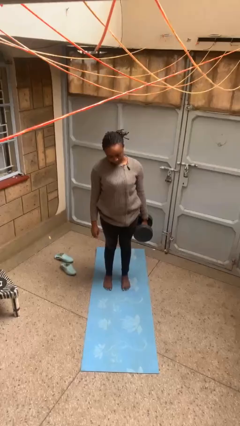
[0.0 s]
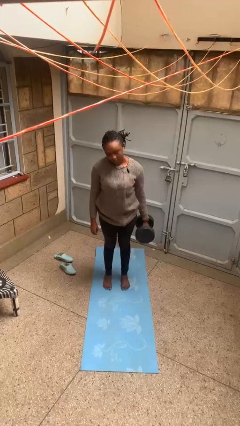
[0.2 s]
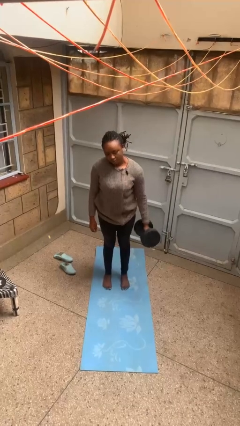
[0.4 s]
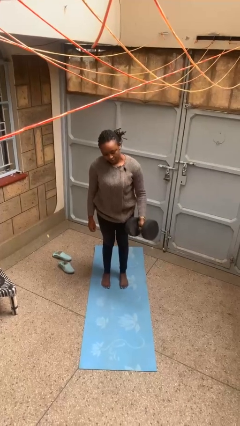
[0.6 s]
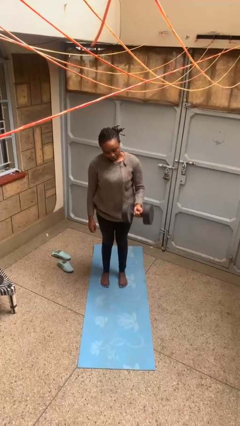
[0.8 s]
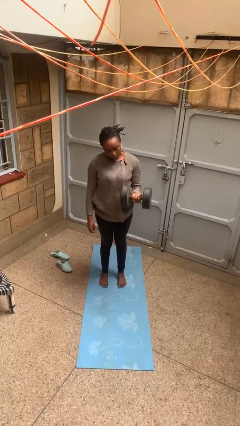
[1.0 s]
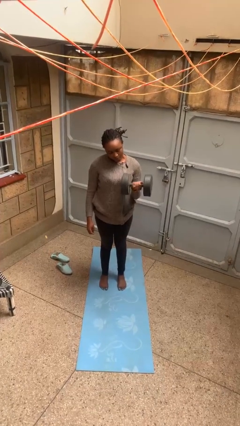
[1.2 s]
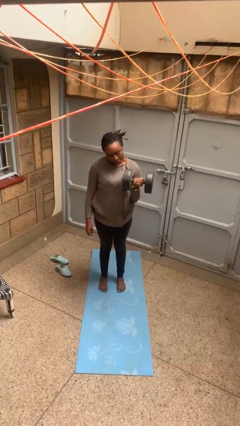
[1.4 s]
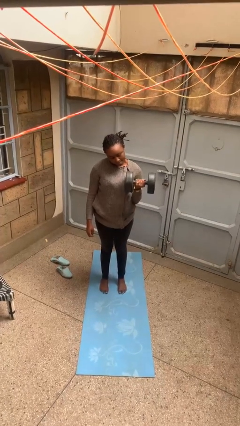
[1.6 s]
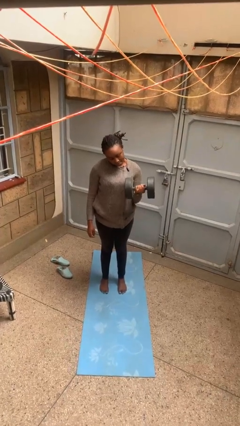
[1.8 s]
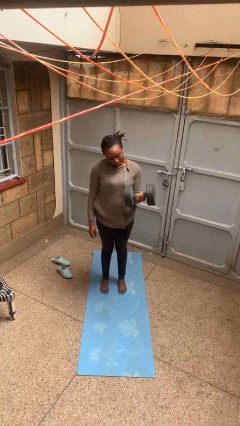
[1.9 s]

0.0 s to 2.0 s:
person lifts dumbbells

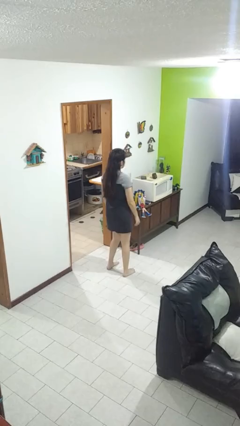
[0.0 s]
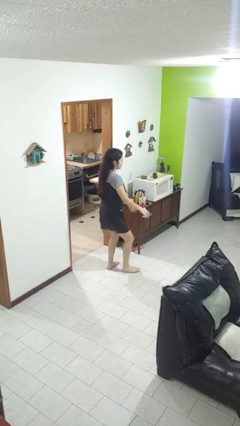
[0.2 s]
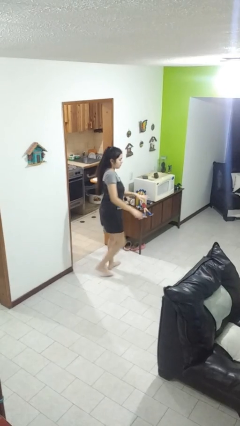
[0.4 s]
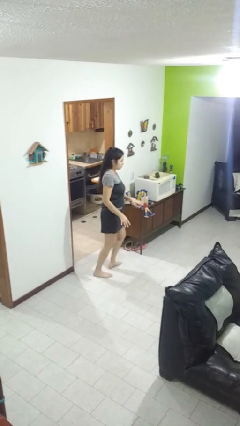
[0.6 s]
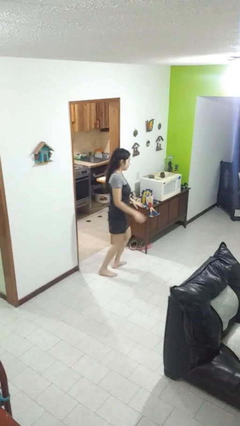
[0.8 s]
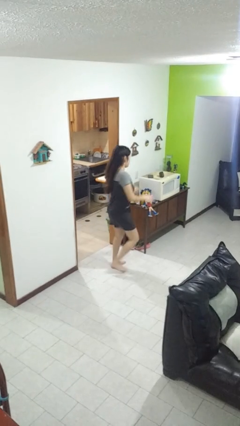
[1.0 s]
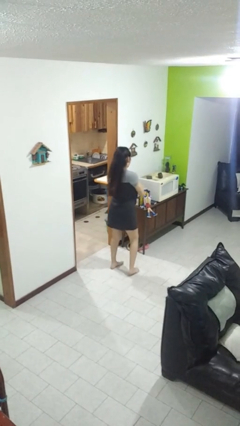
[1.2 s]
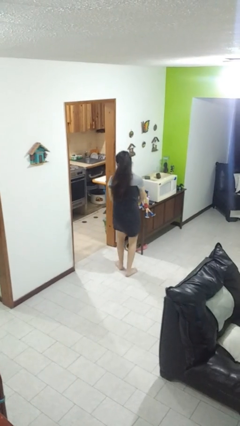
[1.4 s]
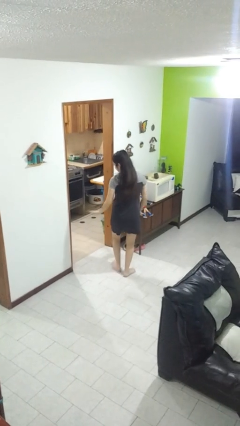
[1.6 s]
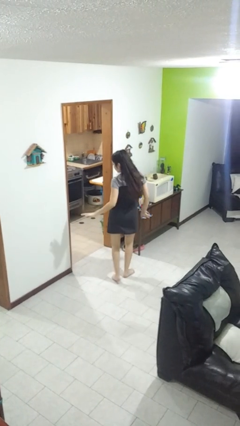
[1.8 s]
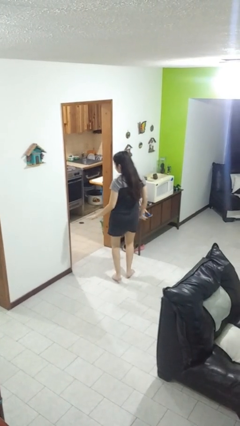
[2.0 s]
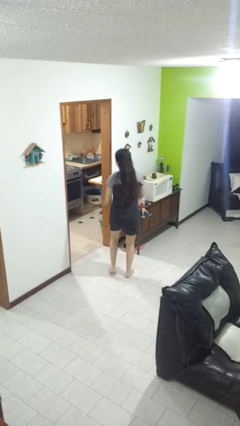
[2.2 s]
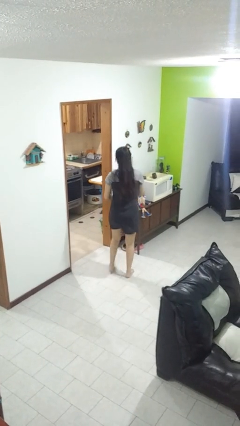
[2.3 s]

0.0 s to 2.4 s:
person dances in place

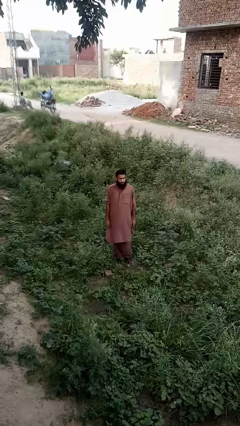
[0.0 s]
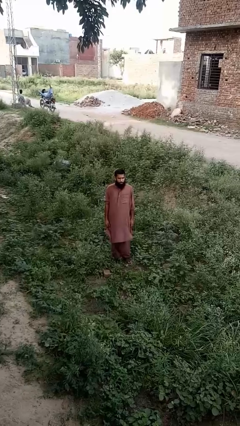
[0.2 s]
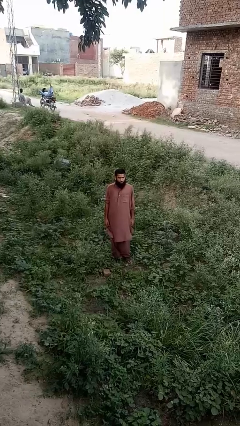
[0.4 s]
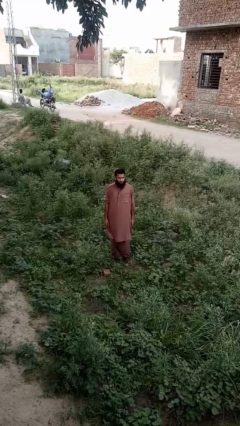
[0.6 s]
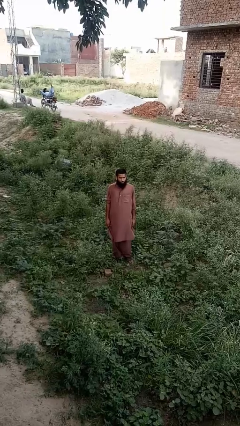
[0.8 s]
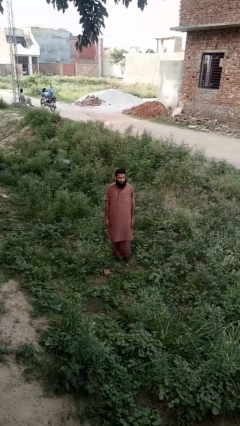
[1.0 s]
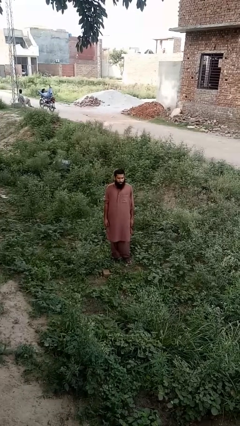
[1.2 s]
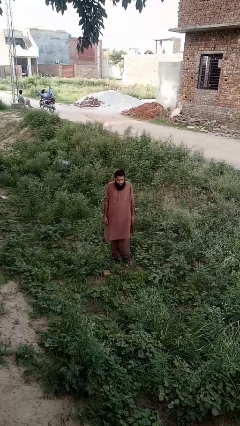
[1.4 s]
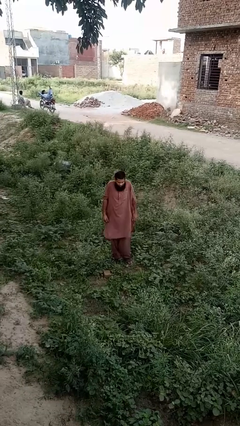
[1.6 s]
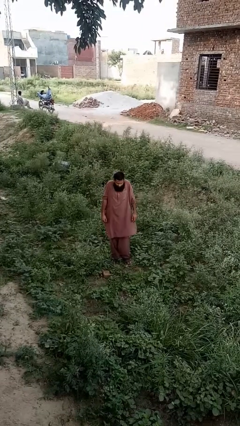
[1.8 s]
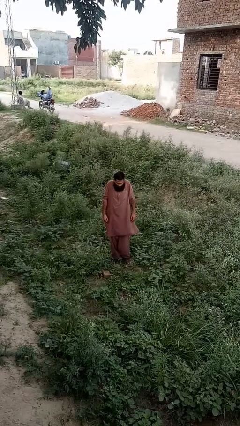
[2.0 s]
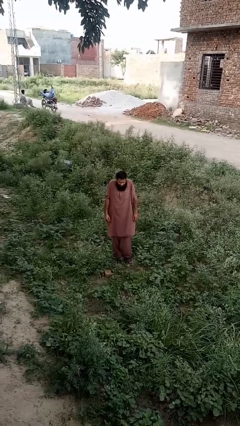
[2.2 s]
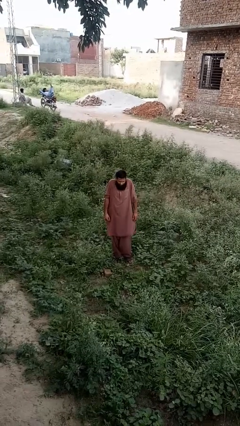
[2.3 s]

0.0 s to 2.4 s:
person shrugs

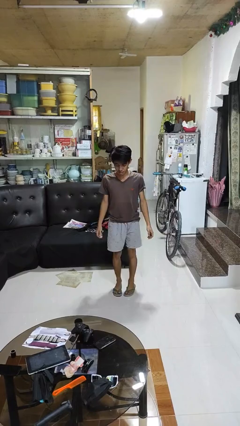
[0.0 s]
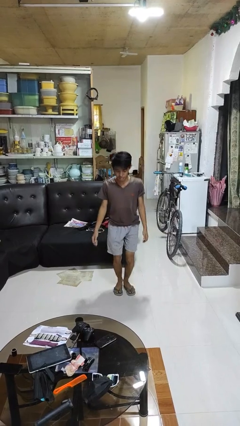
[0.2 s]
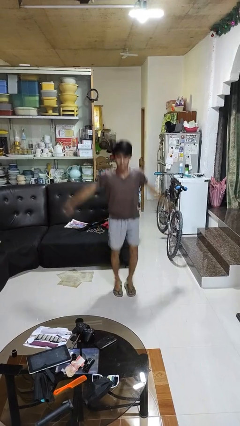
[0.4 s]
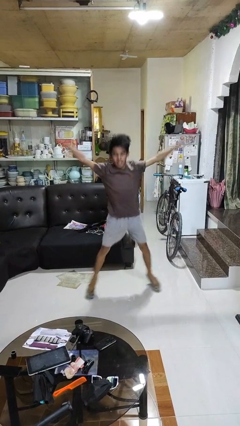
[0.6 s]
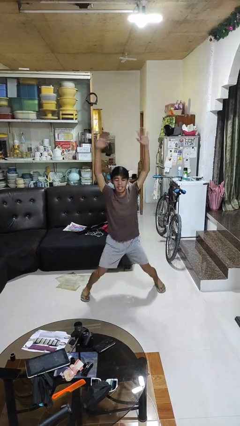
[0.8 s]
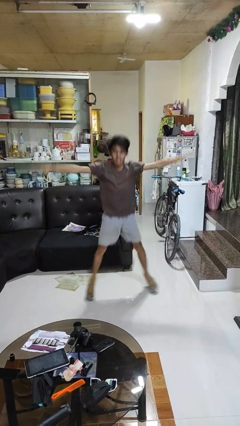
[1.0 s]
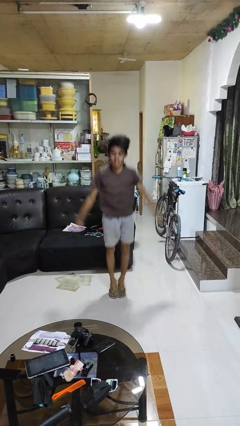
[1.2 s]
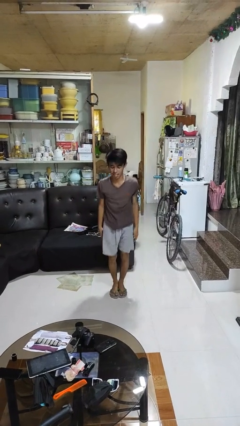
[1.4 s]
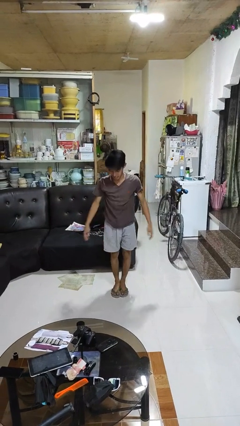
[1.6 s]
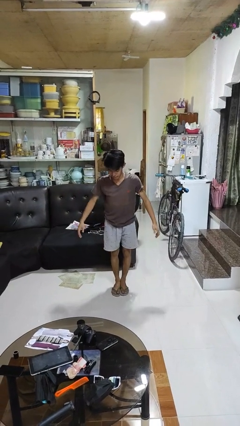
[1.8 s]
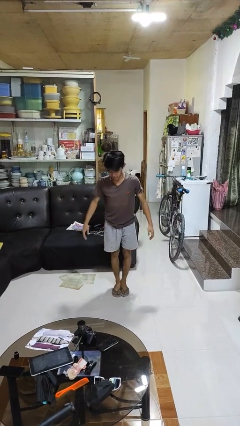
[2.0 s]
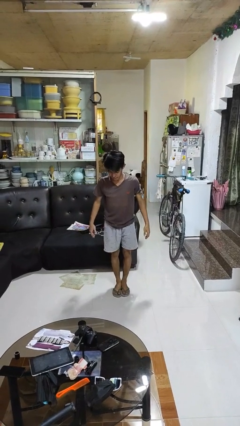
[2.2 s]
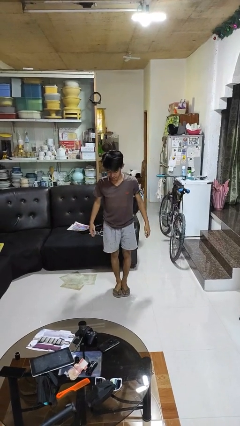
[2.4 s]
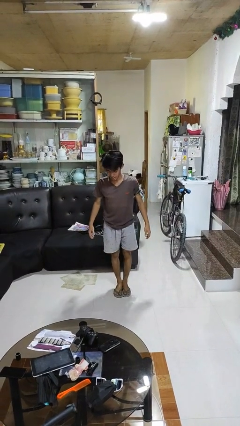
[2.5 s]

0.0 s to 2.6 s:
person exercises with jumping jacks

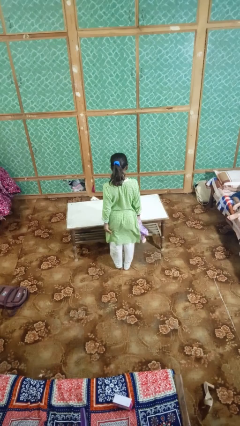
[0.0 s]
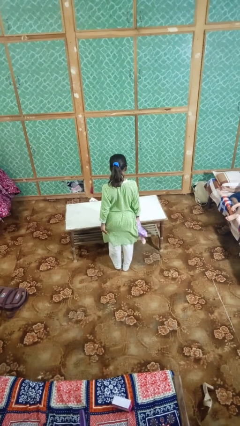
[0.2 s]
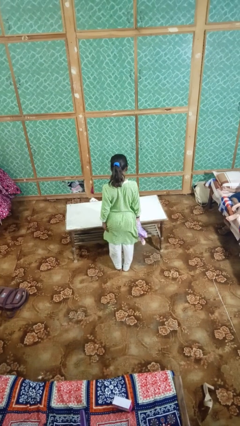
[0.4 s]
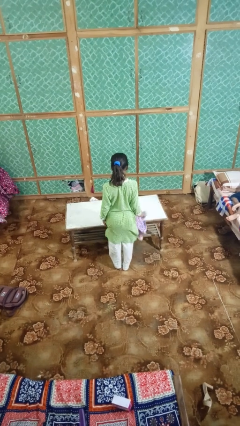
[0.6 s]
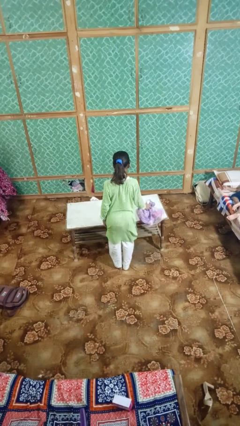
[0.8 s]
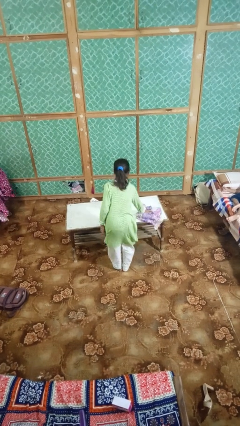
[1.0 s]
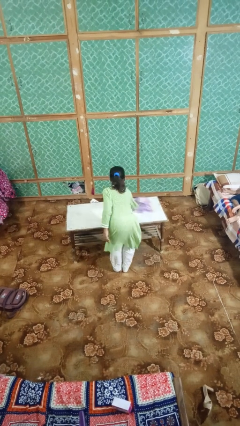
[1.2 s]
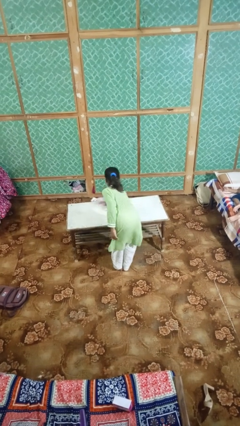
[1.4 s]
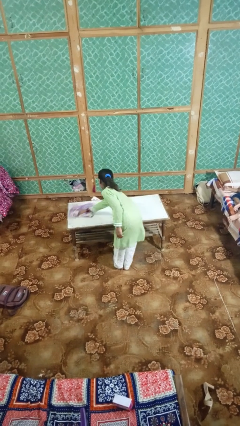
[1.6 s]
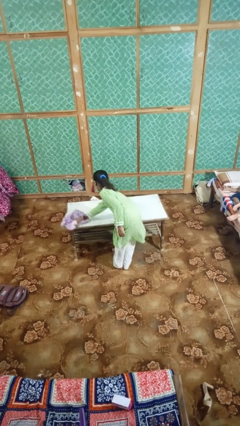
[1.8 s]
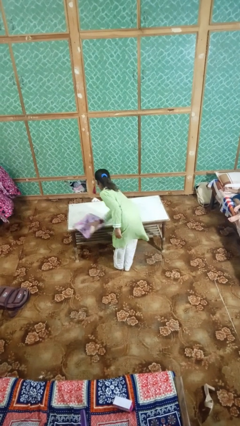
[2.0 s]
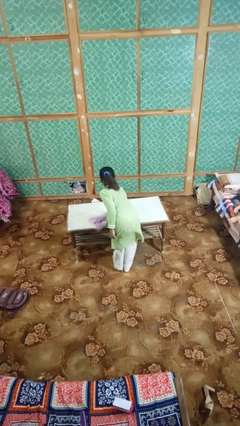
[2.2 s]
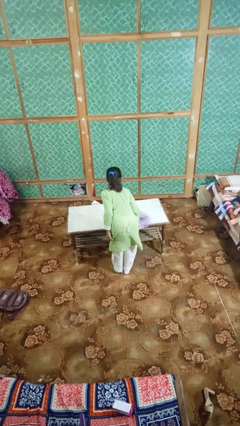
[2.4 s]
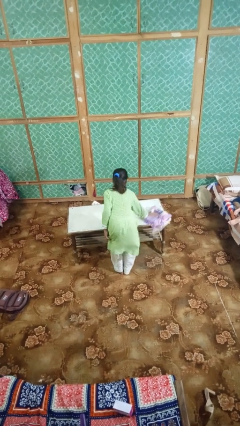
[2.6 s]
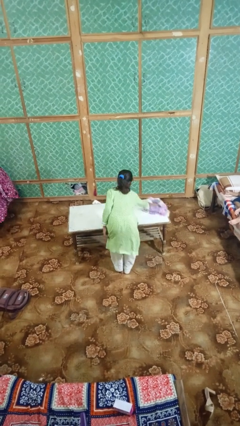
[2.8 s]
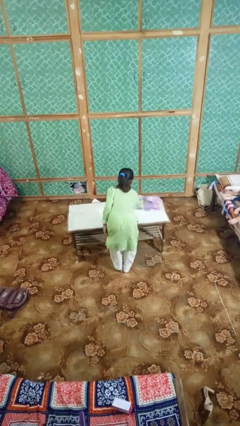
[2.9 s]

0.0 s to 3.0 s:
person cleans table with rag

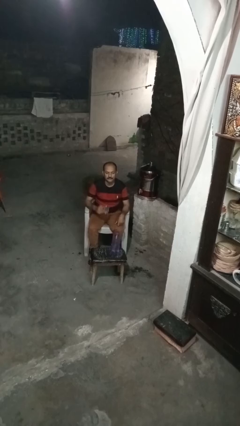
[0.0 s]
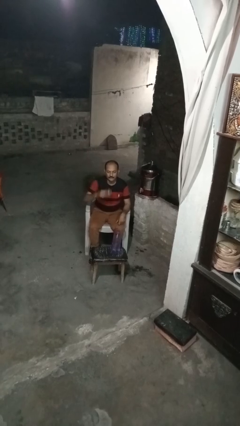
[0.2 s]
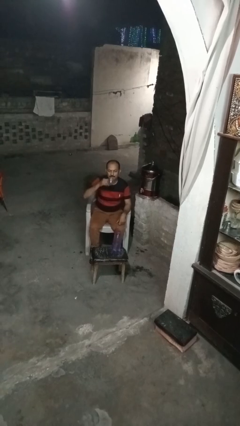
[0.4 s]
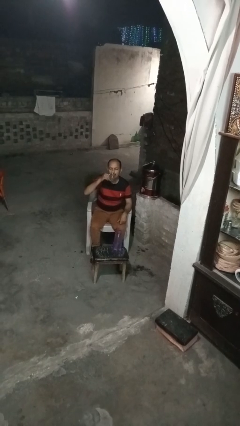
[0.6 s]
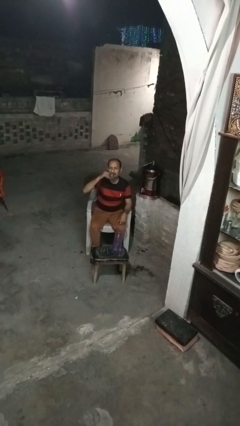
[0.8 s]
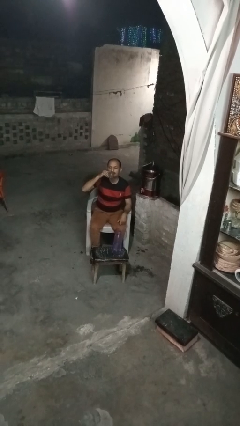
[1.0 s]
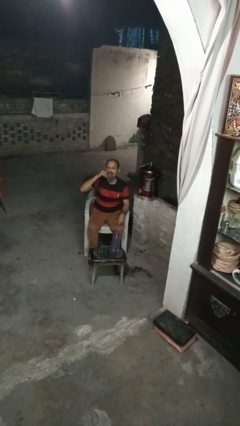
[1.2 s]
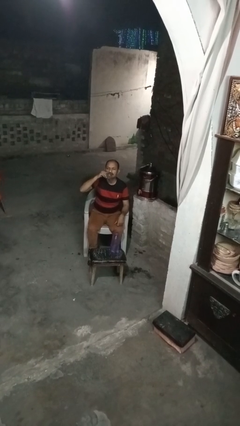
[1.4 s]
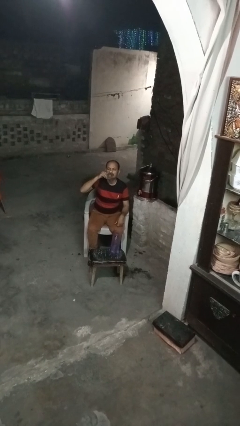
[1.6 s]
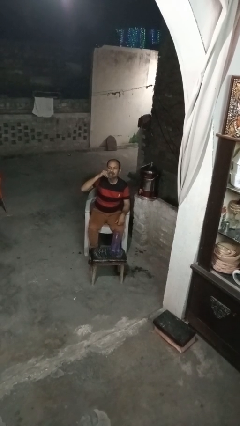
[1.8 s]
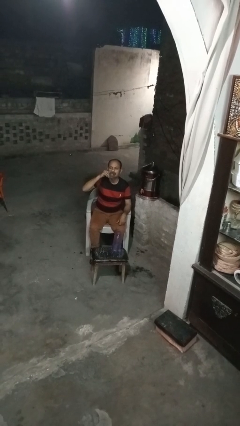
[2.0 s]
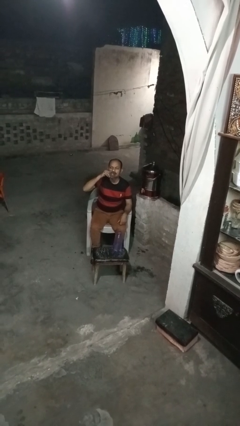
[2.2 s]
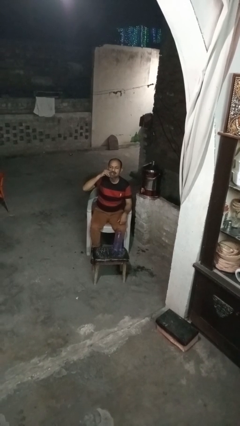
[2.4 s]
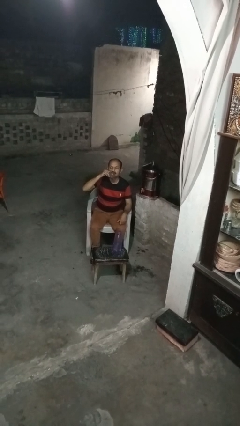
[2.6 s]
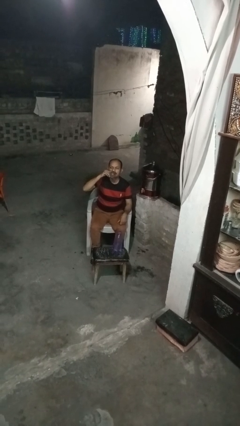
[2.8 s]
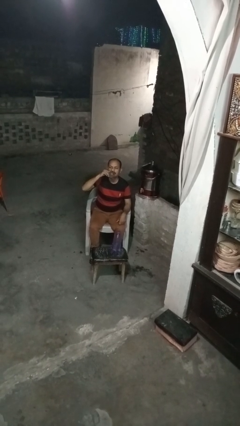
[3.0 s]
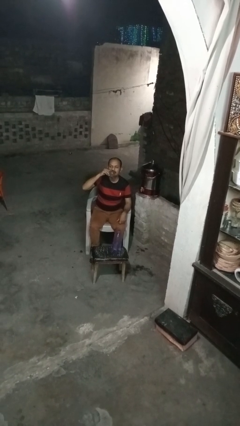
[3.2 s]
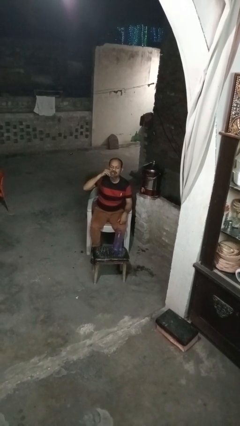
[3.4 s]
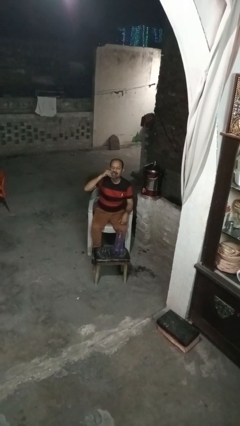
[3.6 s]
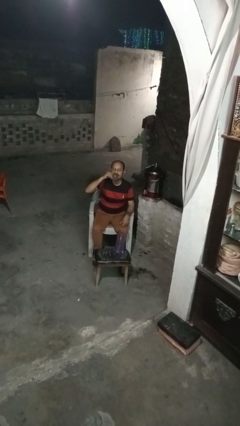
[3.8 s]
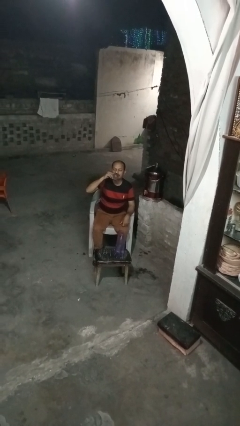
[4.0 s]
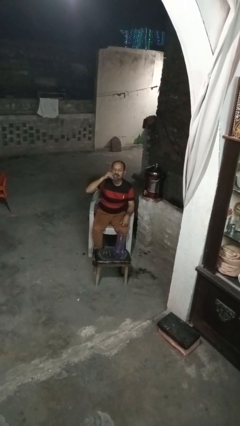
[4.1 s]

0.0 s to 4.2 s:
person drinks from shotglass

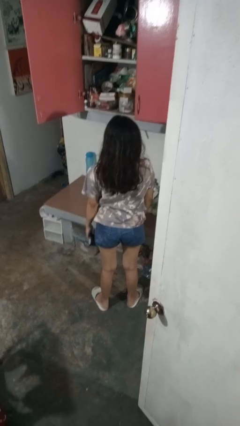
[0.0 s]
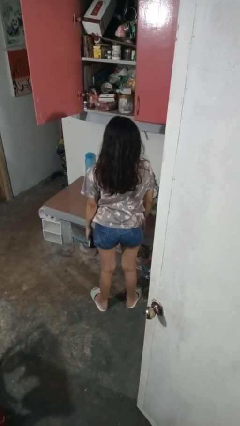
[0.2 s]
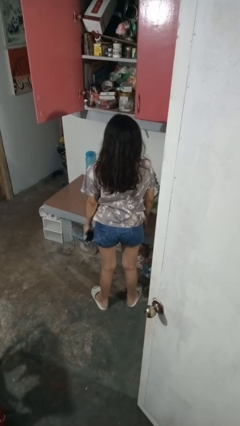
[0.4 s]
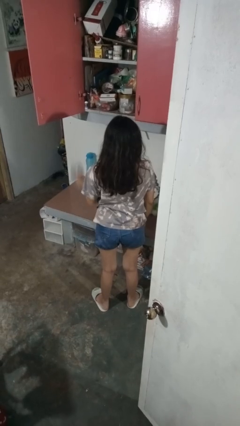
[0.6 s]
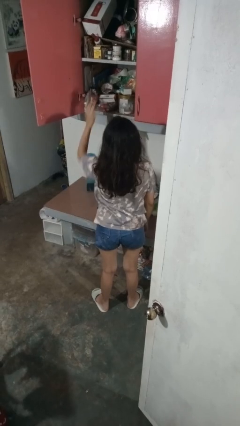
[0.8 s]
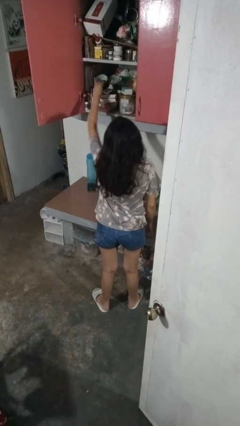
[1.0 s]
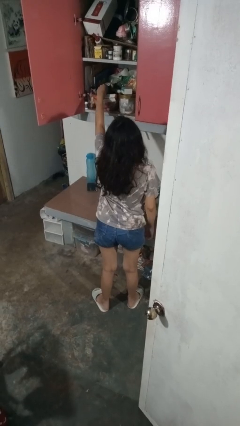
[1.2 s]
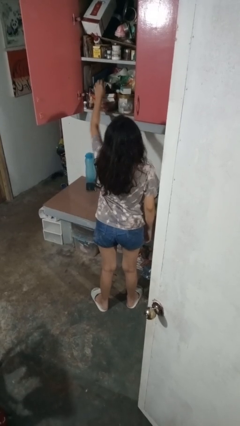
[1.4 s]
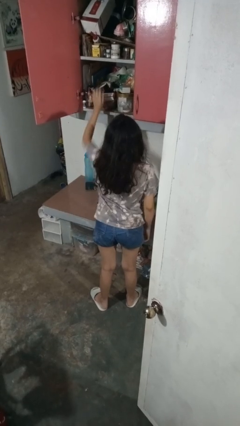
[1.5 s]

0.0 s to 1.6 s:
person puts object in cabinet
